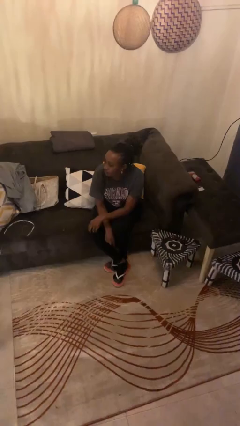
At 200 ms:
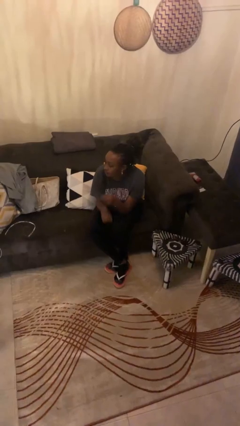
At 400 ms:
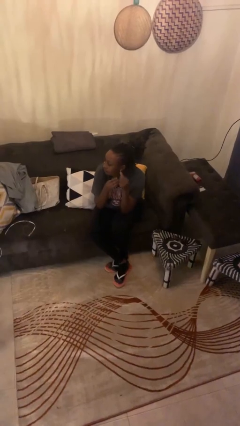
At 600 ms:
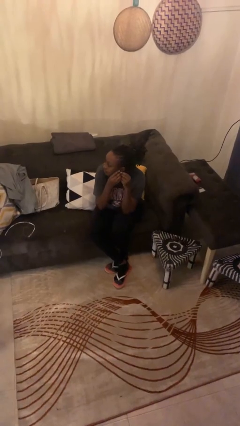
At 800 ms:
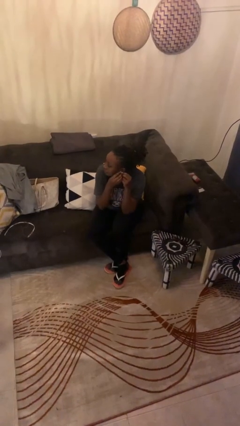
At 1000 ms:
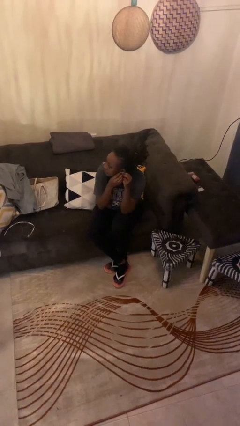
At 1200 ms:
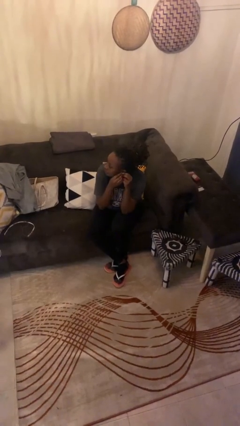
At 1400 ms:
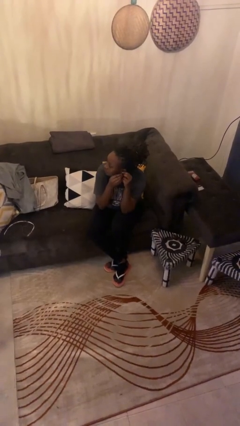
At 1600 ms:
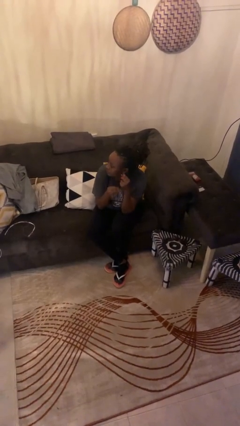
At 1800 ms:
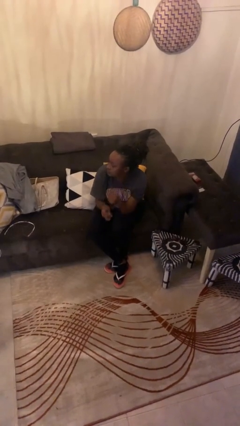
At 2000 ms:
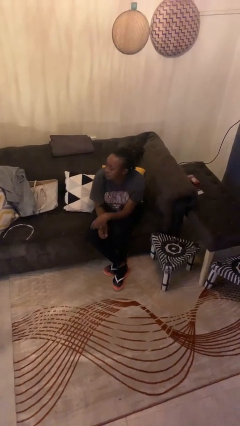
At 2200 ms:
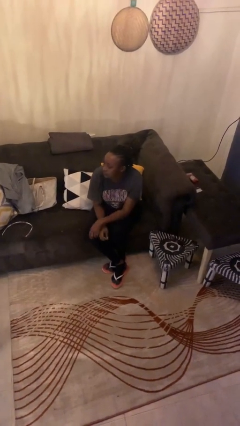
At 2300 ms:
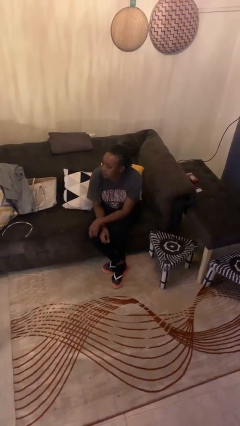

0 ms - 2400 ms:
person takes off earrings

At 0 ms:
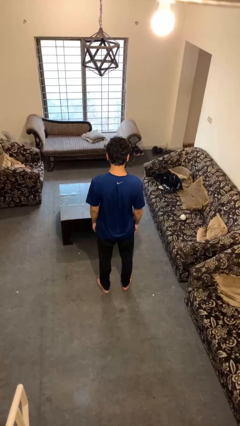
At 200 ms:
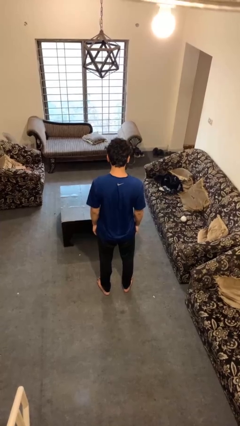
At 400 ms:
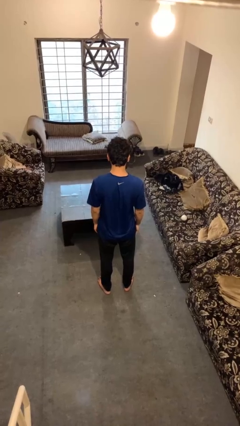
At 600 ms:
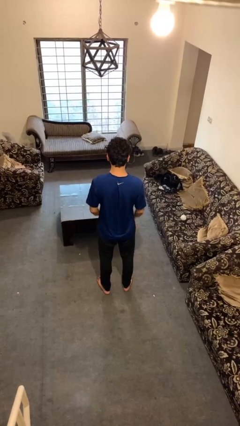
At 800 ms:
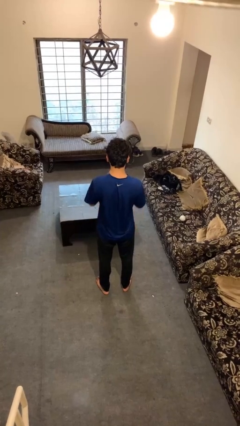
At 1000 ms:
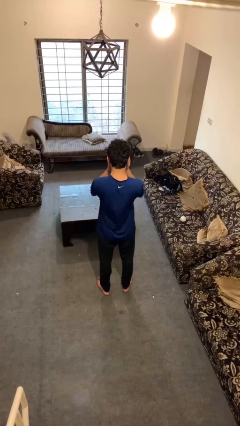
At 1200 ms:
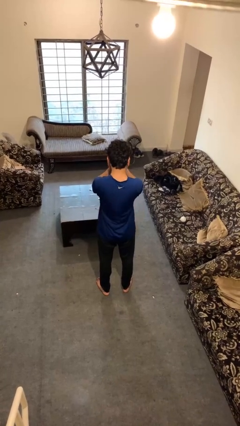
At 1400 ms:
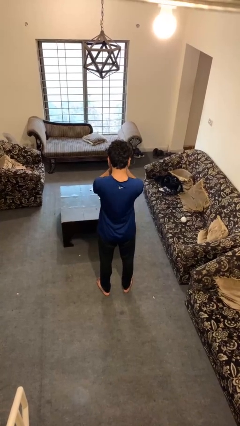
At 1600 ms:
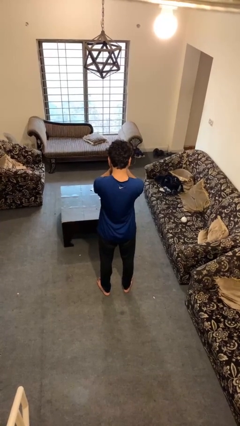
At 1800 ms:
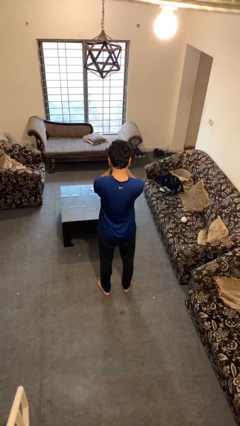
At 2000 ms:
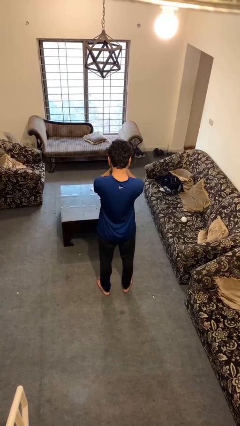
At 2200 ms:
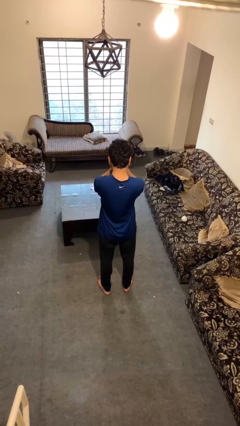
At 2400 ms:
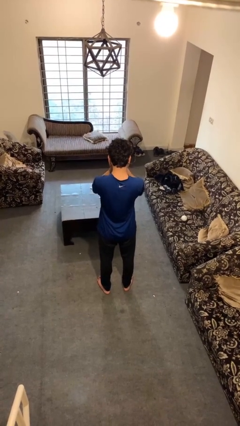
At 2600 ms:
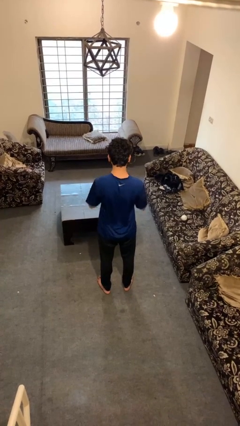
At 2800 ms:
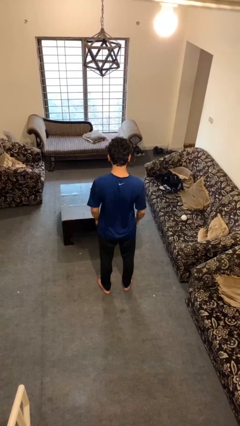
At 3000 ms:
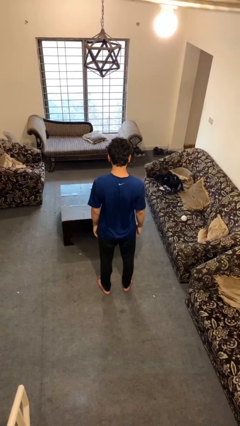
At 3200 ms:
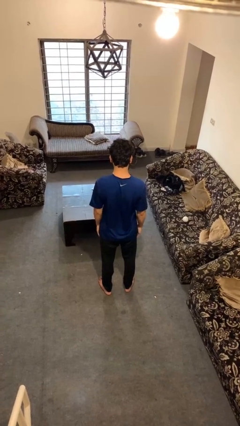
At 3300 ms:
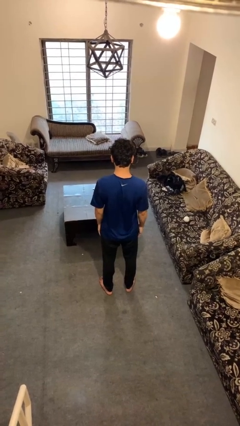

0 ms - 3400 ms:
person covers face with hands

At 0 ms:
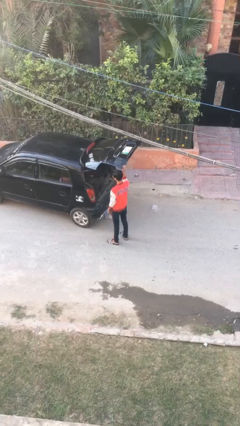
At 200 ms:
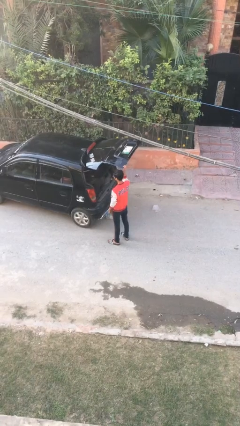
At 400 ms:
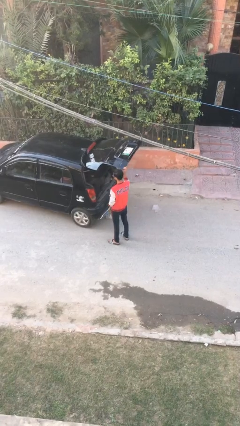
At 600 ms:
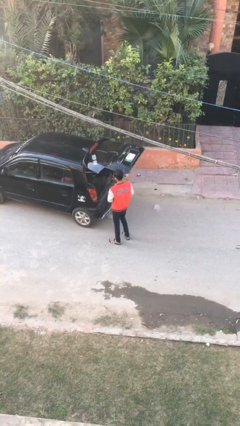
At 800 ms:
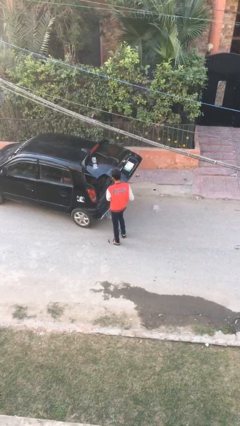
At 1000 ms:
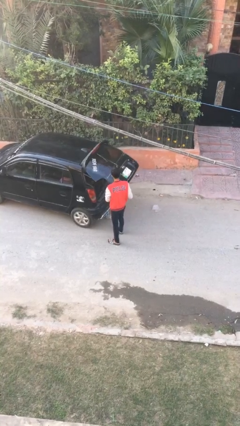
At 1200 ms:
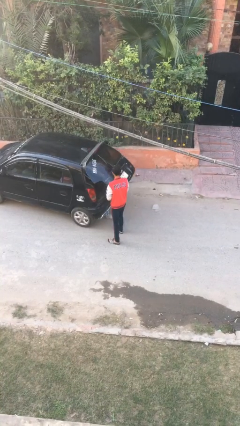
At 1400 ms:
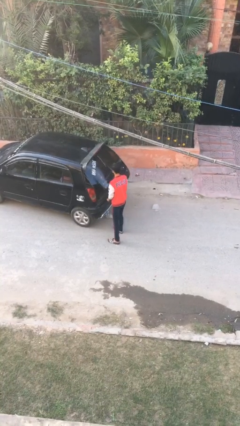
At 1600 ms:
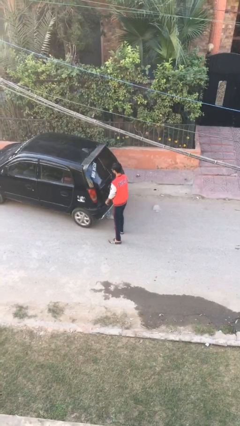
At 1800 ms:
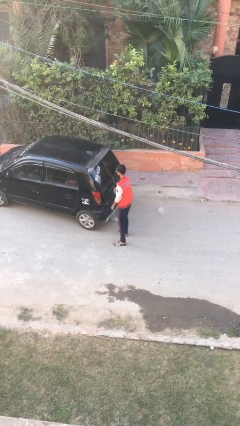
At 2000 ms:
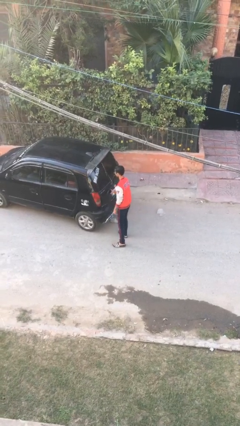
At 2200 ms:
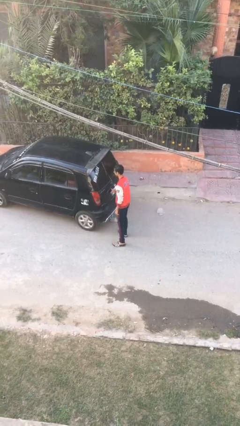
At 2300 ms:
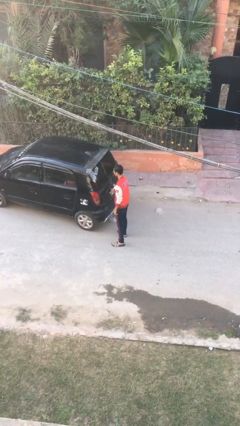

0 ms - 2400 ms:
person closes car trunk

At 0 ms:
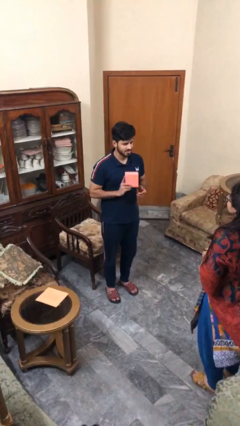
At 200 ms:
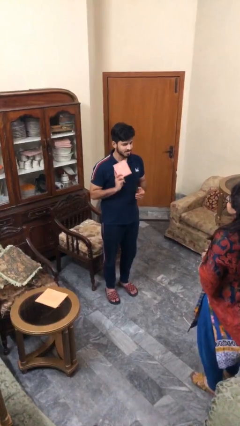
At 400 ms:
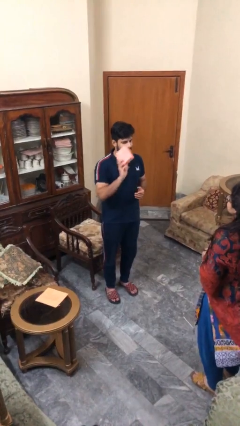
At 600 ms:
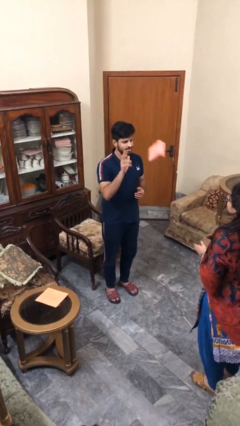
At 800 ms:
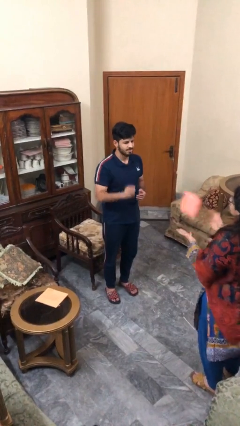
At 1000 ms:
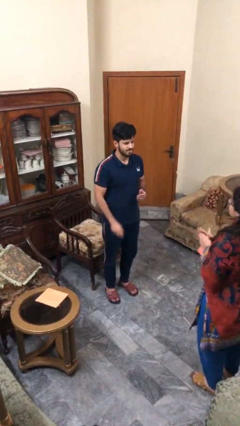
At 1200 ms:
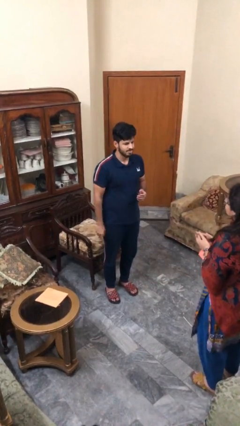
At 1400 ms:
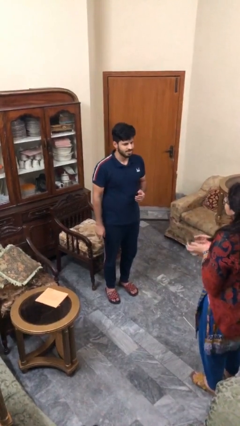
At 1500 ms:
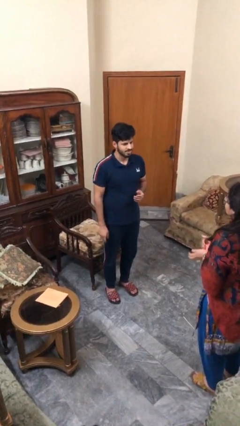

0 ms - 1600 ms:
person throws object to person

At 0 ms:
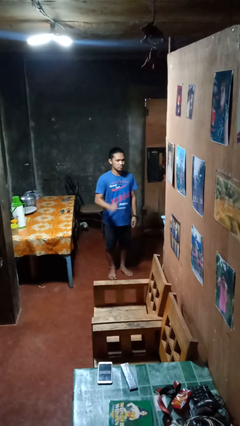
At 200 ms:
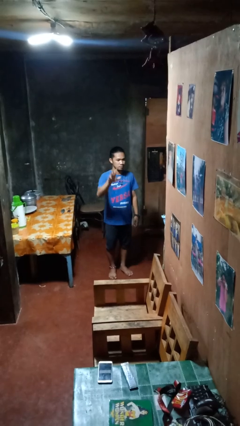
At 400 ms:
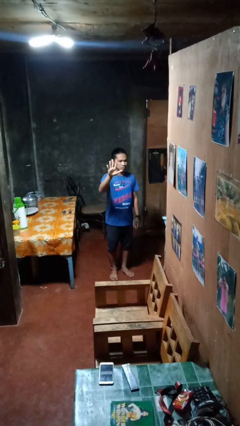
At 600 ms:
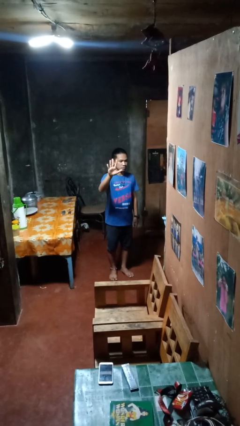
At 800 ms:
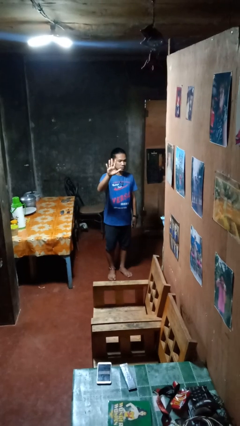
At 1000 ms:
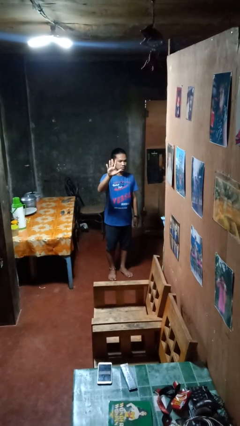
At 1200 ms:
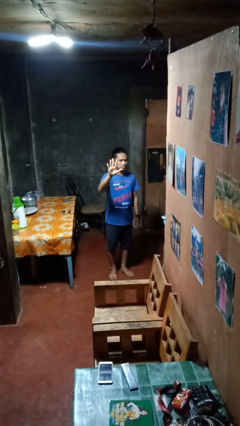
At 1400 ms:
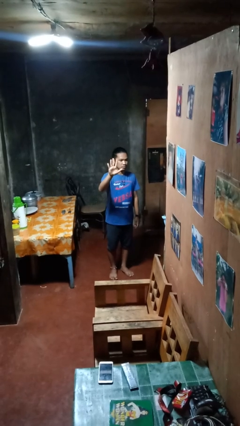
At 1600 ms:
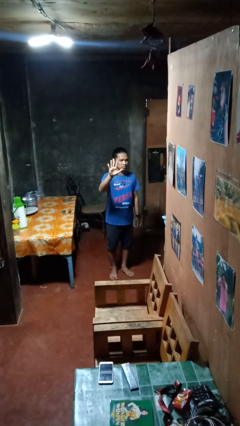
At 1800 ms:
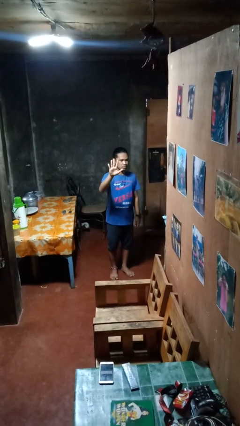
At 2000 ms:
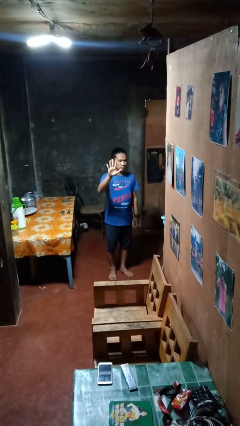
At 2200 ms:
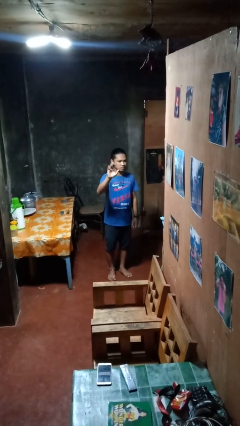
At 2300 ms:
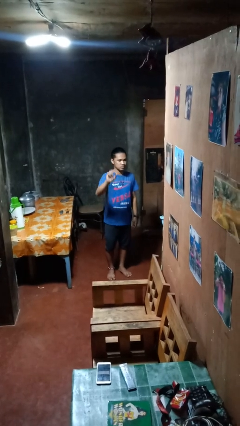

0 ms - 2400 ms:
person gestures number five

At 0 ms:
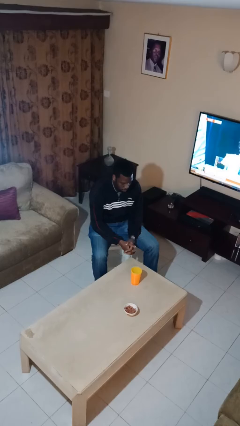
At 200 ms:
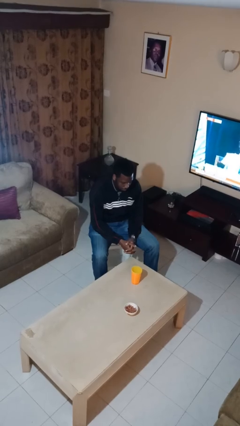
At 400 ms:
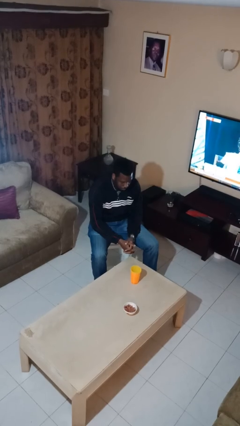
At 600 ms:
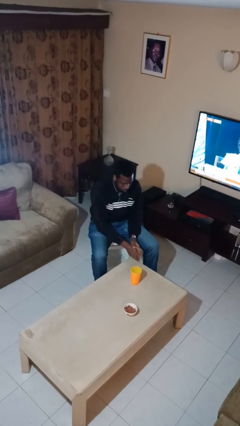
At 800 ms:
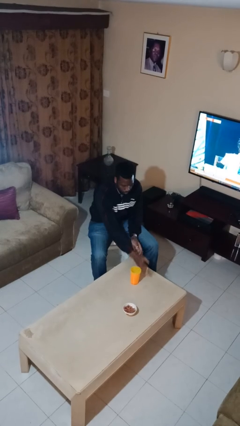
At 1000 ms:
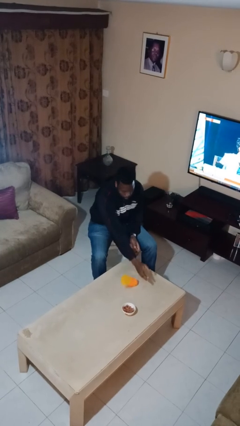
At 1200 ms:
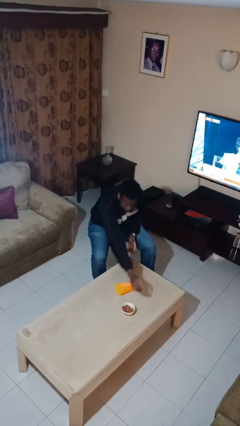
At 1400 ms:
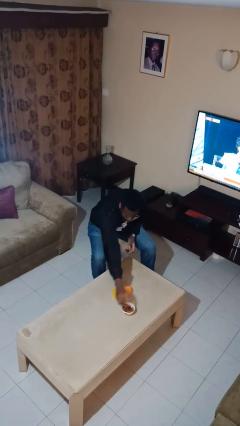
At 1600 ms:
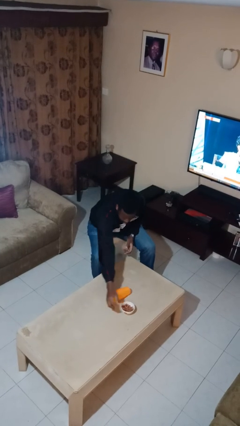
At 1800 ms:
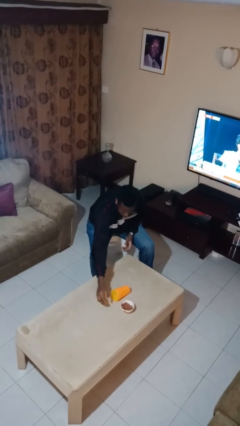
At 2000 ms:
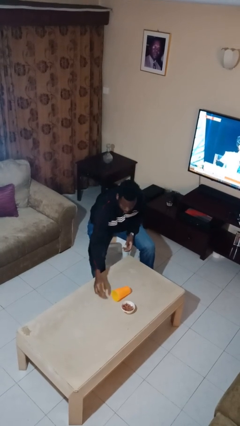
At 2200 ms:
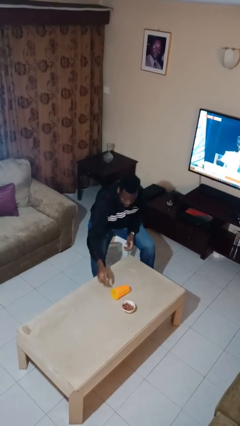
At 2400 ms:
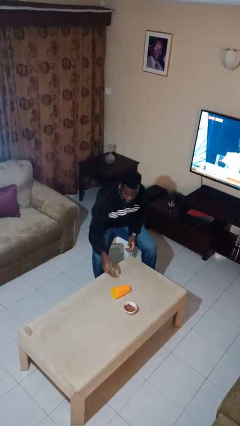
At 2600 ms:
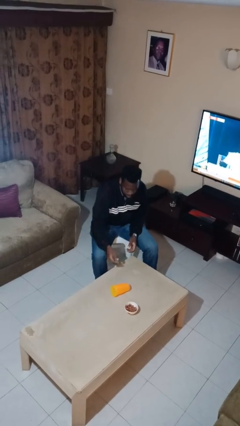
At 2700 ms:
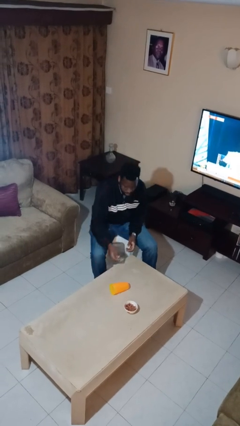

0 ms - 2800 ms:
person knocks over glass

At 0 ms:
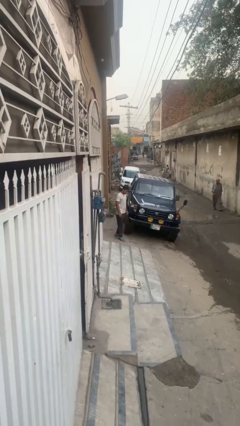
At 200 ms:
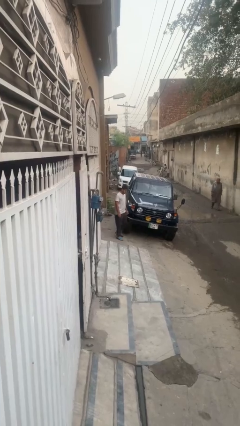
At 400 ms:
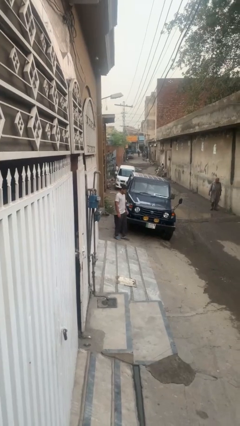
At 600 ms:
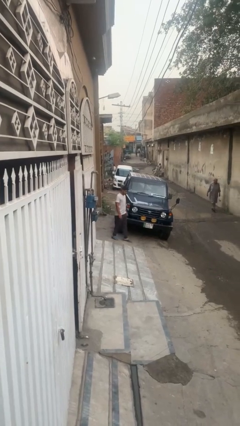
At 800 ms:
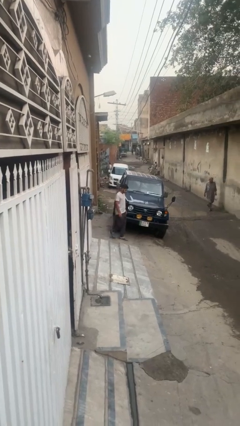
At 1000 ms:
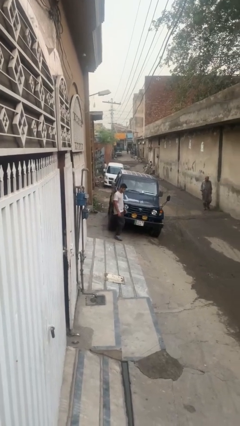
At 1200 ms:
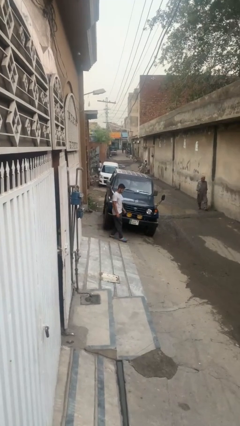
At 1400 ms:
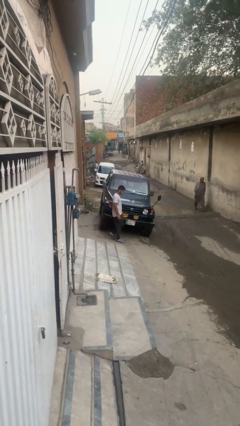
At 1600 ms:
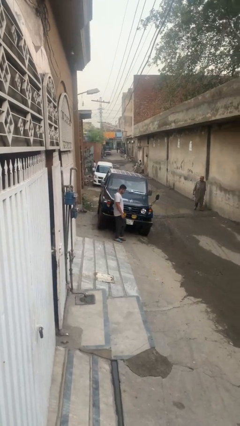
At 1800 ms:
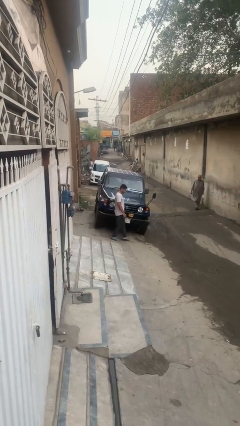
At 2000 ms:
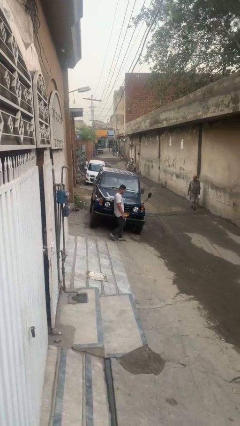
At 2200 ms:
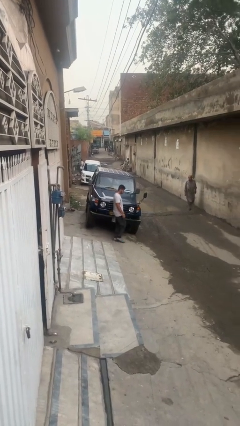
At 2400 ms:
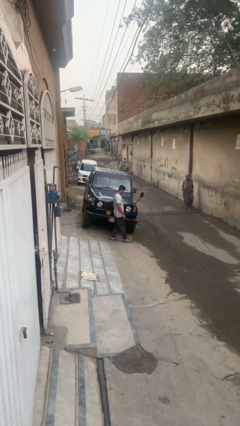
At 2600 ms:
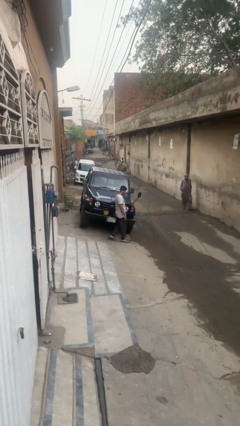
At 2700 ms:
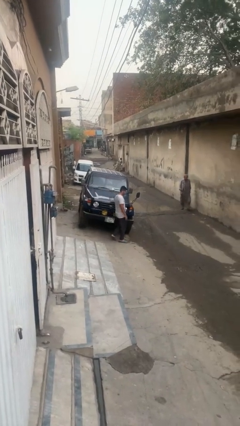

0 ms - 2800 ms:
person walks around car
